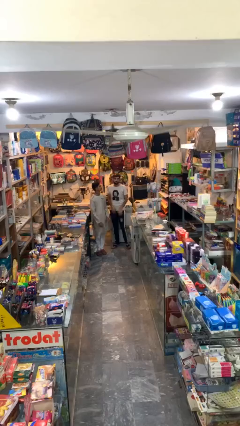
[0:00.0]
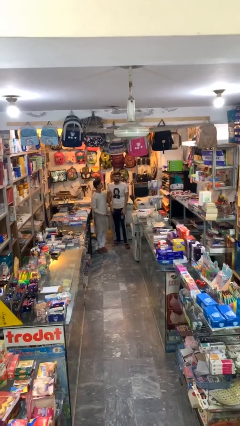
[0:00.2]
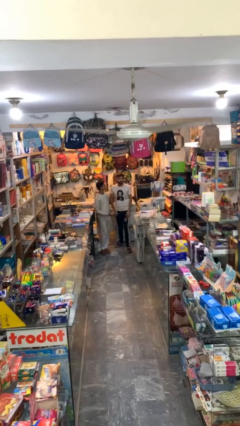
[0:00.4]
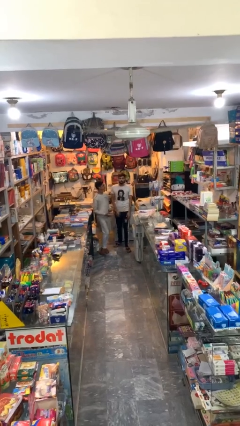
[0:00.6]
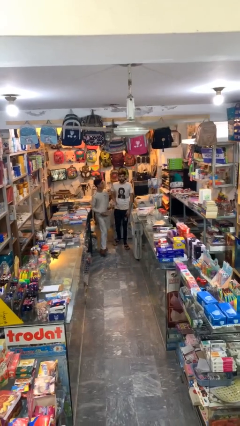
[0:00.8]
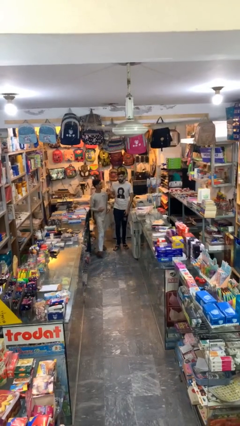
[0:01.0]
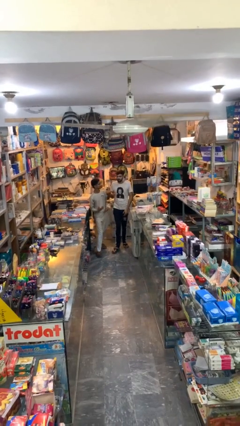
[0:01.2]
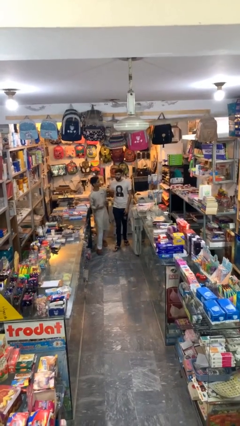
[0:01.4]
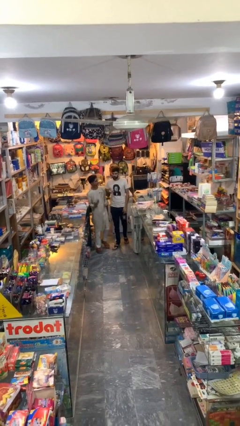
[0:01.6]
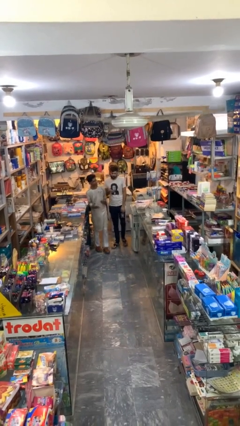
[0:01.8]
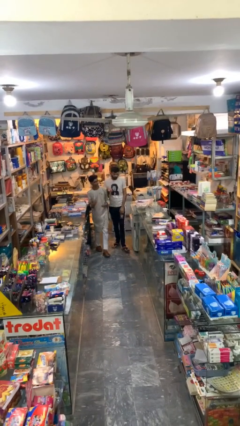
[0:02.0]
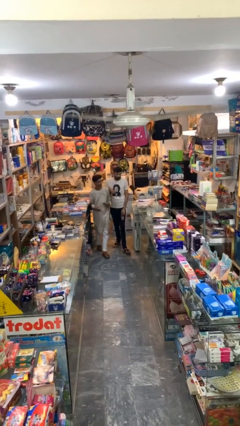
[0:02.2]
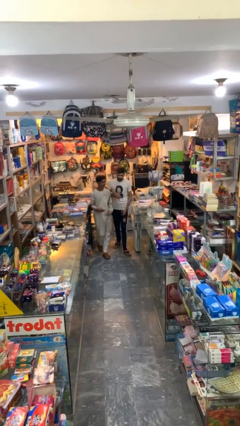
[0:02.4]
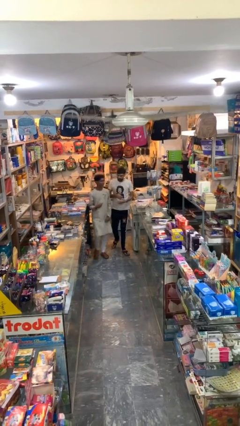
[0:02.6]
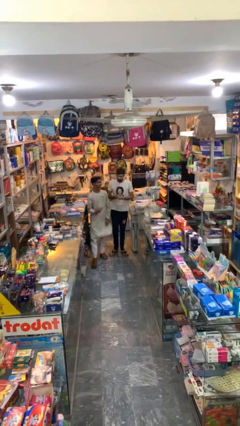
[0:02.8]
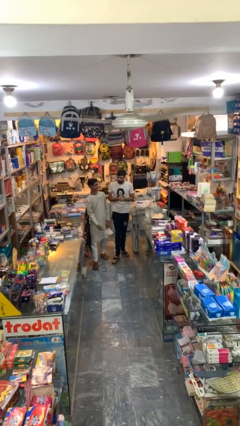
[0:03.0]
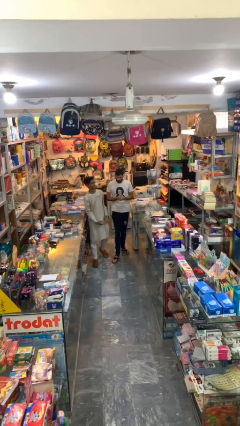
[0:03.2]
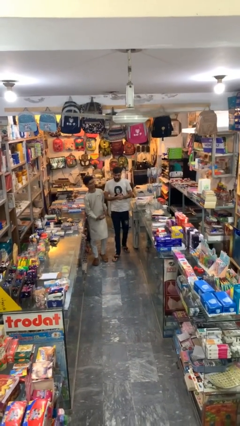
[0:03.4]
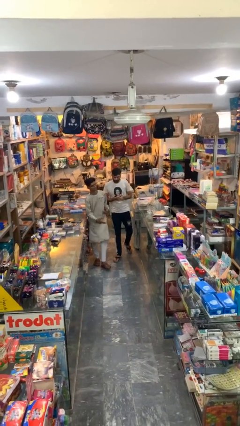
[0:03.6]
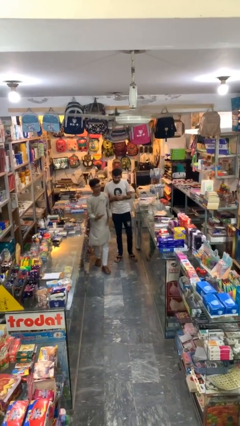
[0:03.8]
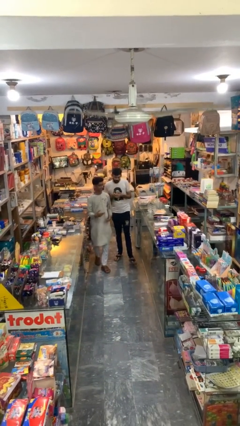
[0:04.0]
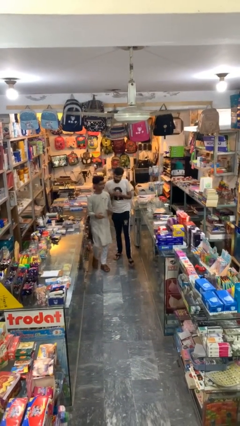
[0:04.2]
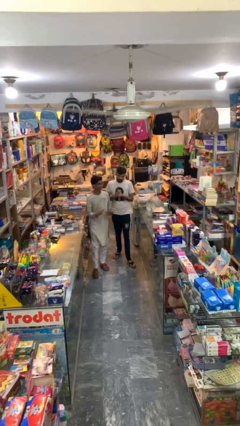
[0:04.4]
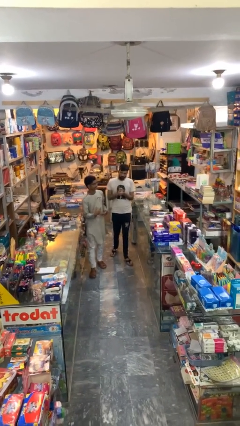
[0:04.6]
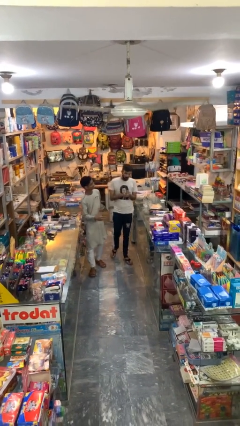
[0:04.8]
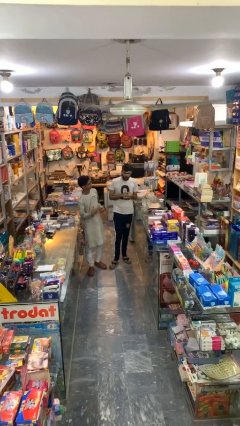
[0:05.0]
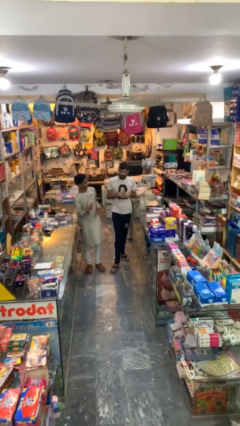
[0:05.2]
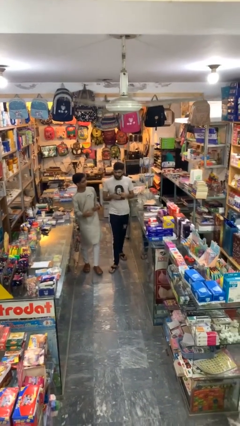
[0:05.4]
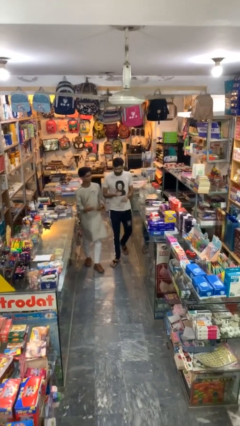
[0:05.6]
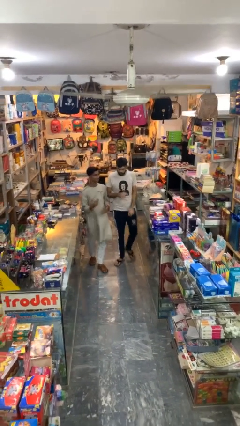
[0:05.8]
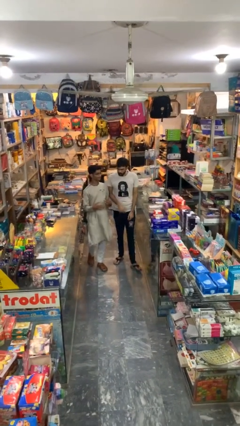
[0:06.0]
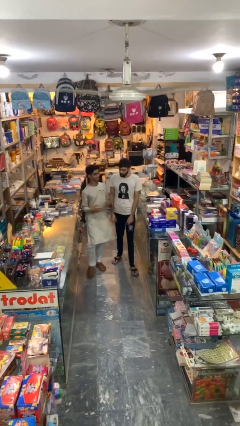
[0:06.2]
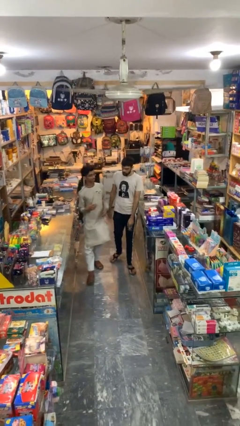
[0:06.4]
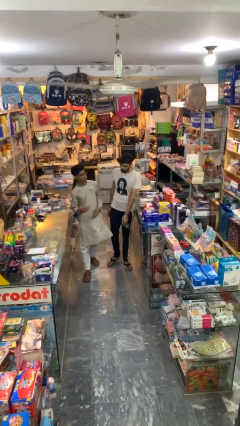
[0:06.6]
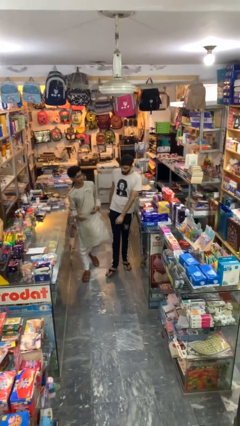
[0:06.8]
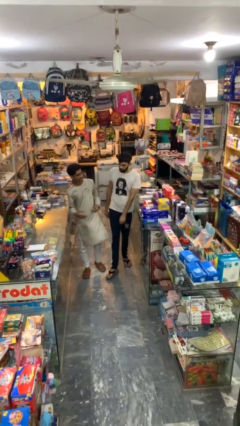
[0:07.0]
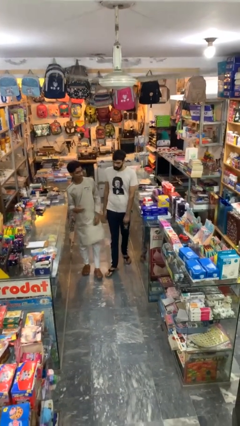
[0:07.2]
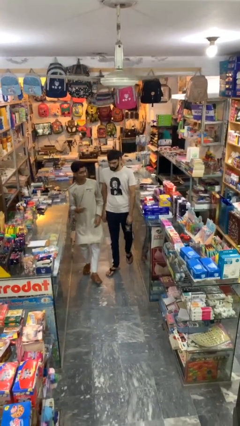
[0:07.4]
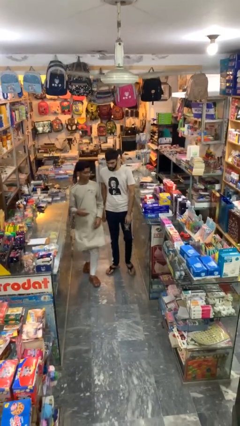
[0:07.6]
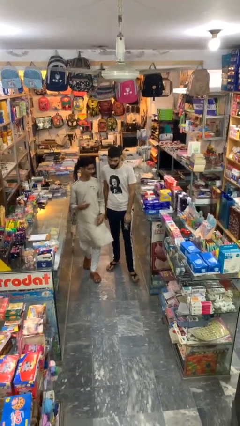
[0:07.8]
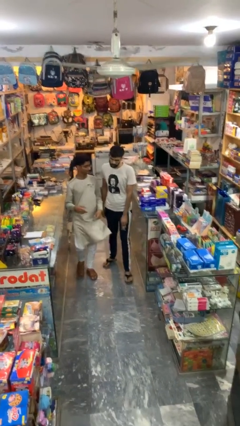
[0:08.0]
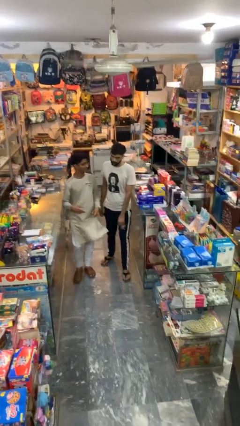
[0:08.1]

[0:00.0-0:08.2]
person talks to person

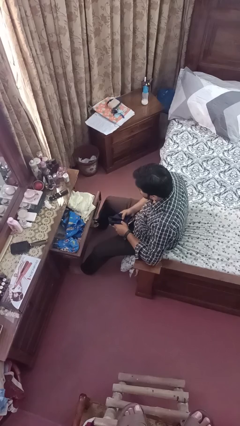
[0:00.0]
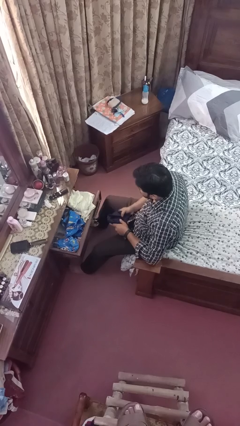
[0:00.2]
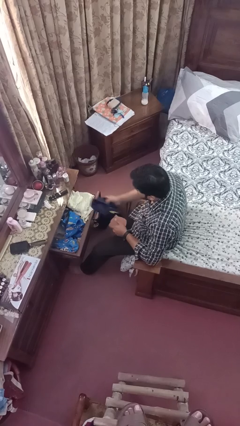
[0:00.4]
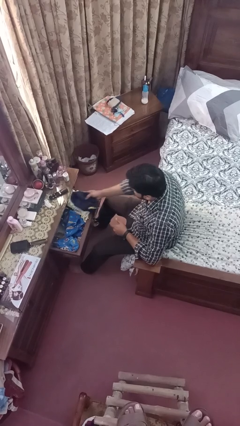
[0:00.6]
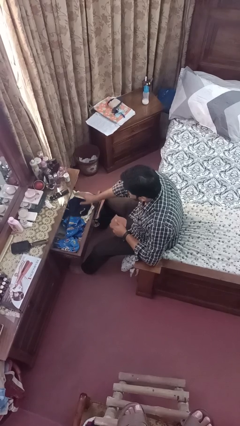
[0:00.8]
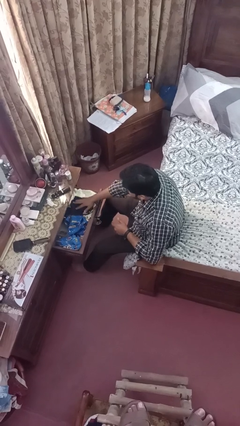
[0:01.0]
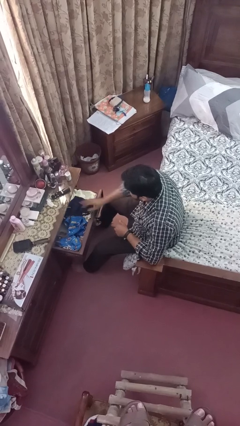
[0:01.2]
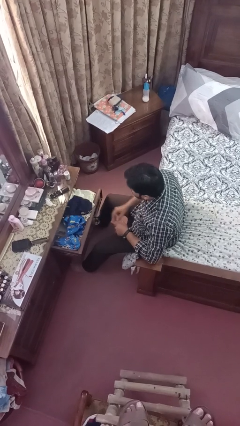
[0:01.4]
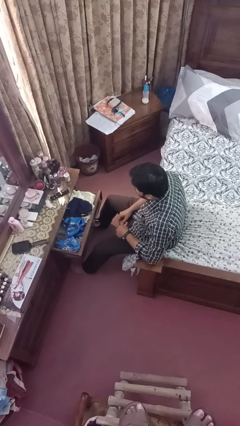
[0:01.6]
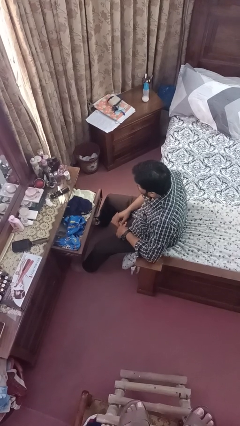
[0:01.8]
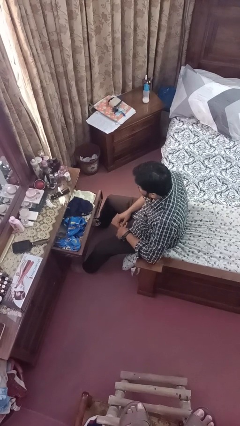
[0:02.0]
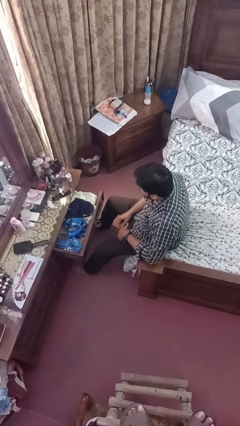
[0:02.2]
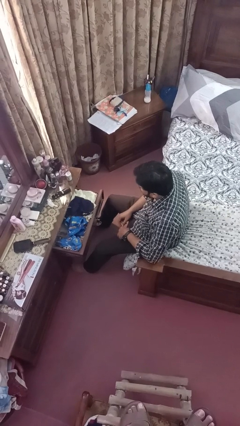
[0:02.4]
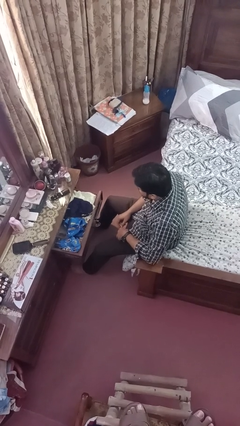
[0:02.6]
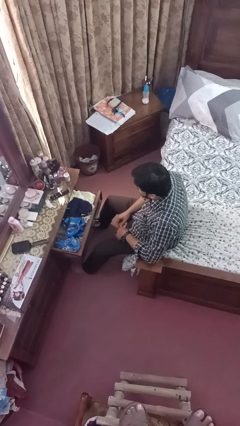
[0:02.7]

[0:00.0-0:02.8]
person puts clothes into dresser

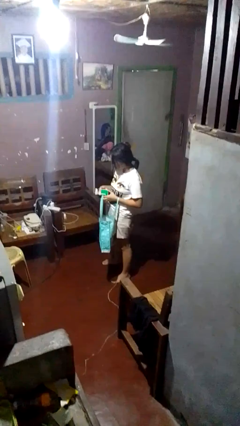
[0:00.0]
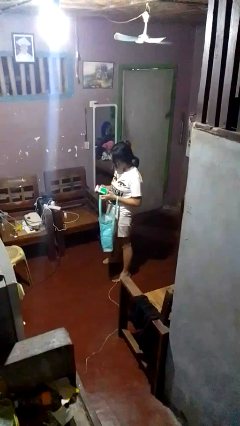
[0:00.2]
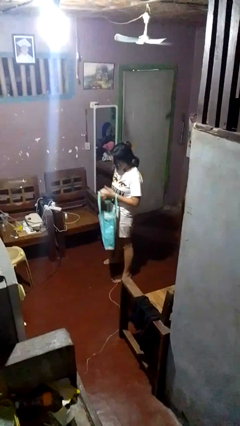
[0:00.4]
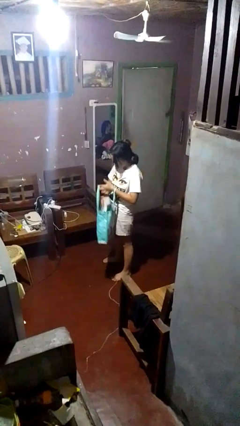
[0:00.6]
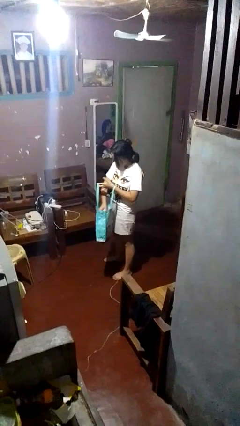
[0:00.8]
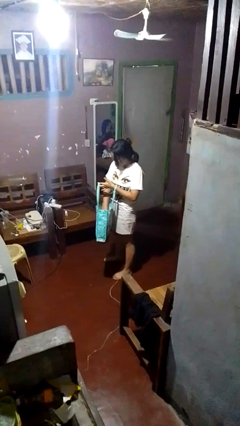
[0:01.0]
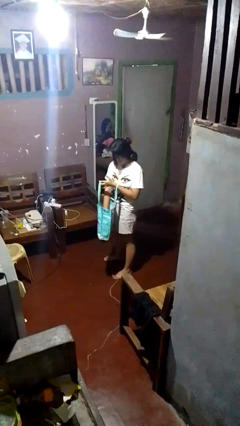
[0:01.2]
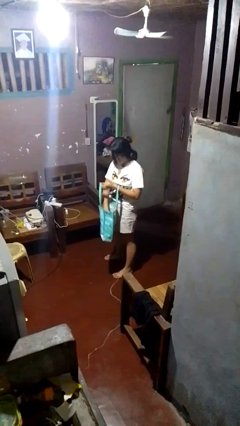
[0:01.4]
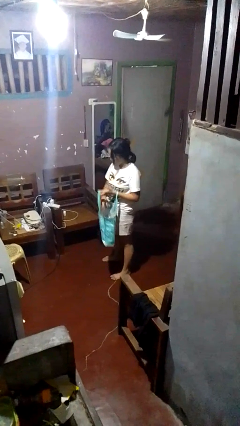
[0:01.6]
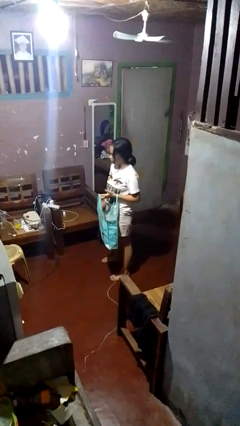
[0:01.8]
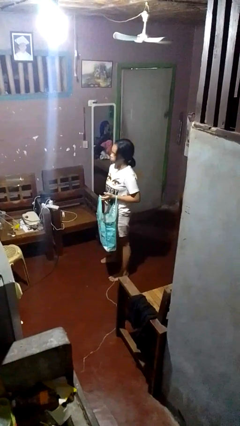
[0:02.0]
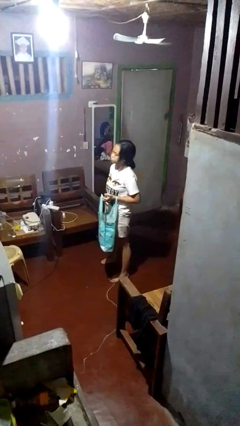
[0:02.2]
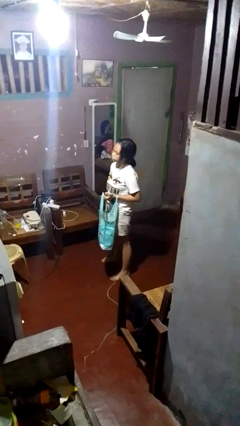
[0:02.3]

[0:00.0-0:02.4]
person puts object into bag

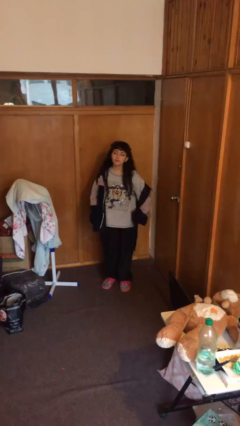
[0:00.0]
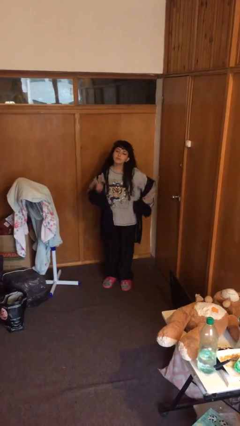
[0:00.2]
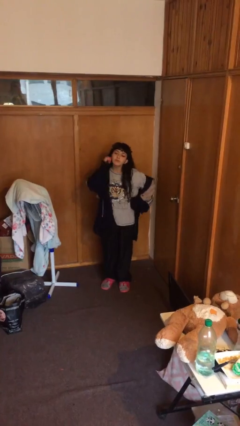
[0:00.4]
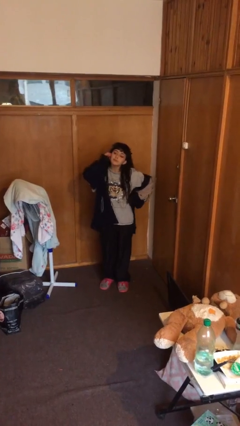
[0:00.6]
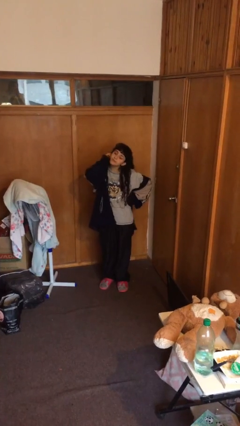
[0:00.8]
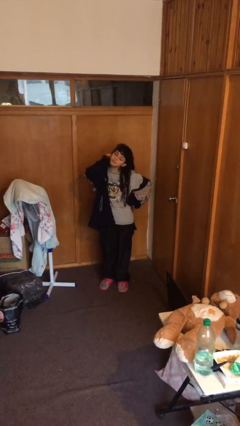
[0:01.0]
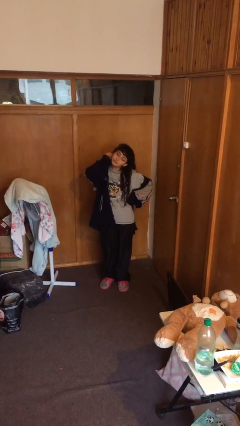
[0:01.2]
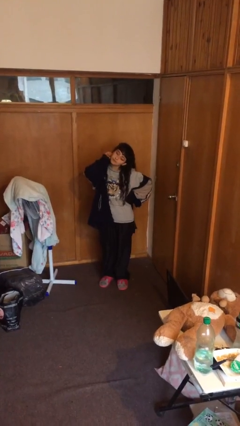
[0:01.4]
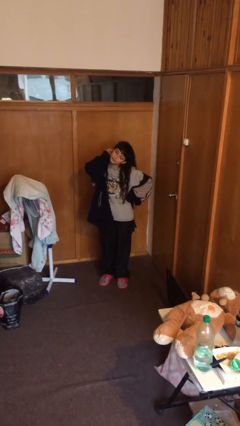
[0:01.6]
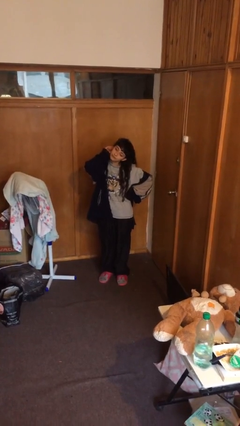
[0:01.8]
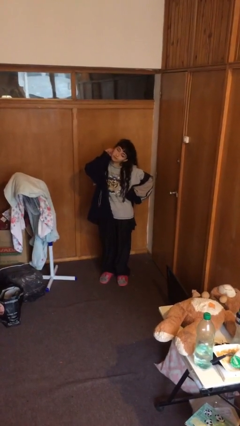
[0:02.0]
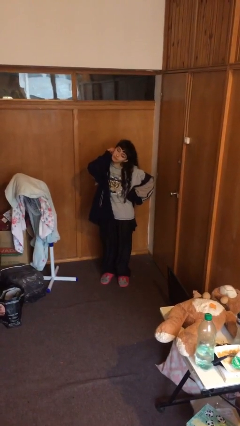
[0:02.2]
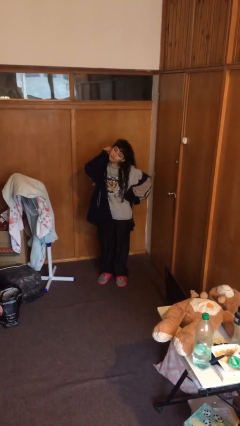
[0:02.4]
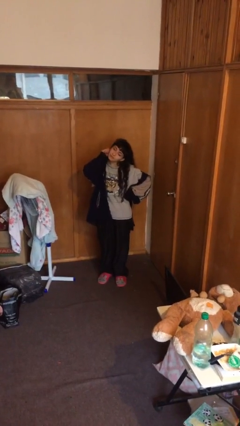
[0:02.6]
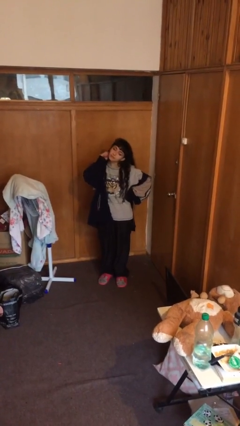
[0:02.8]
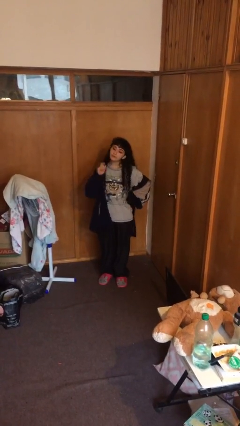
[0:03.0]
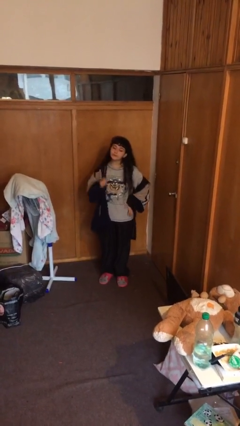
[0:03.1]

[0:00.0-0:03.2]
person touches earlobe

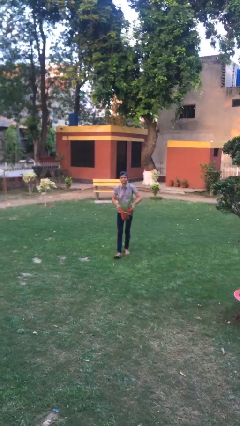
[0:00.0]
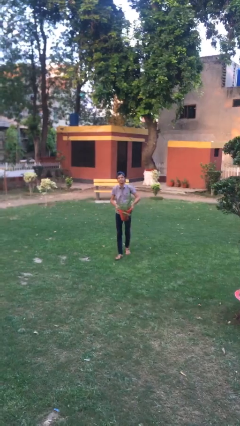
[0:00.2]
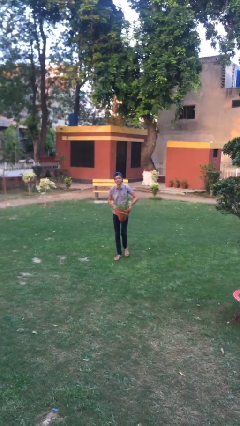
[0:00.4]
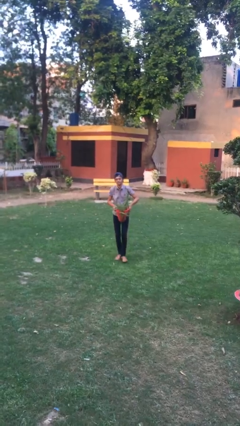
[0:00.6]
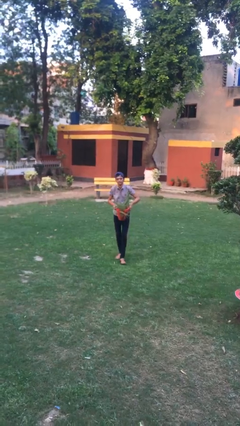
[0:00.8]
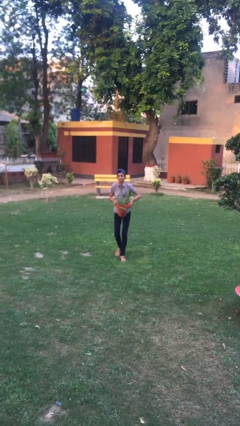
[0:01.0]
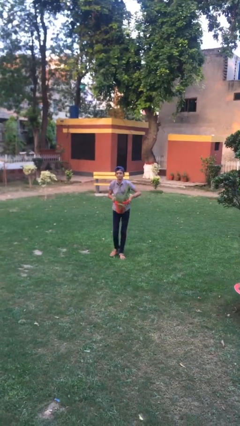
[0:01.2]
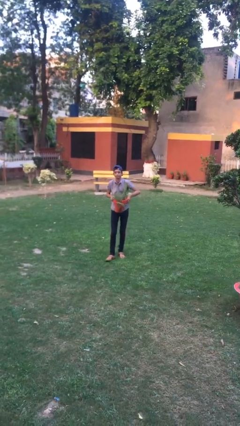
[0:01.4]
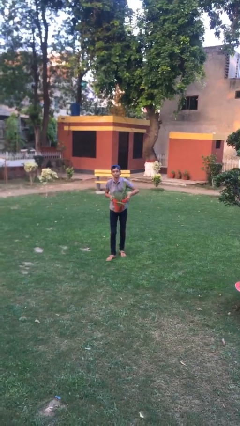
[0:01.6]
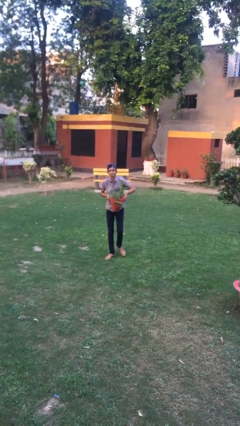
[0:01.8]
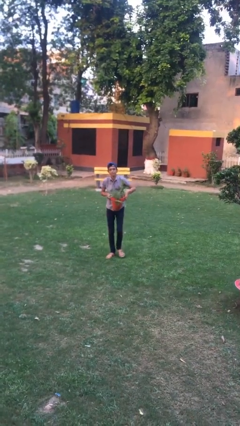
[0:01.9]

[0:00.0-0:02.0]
person carries heavy object
